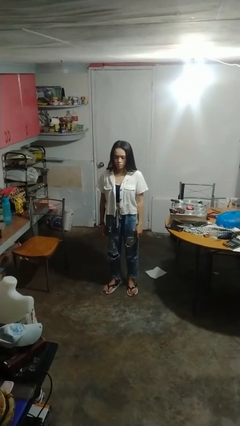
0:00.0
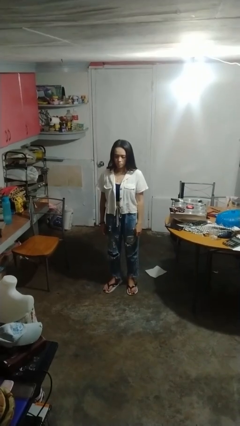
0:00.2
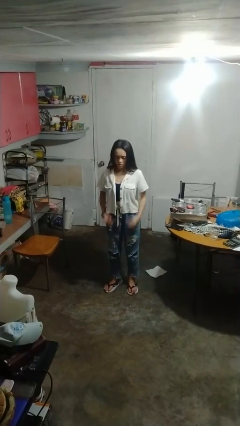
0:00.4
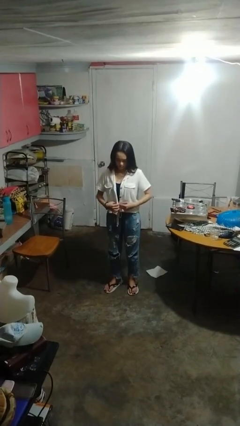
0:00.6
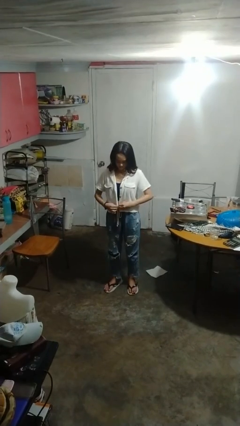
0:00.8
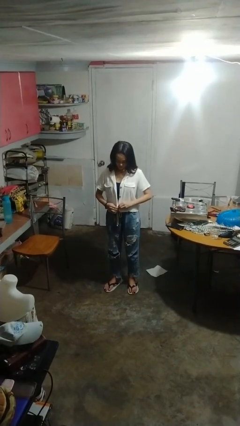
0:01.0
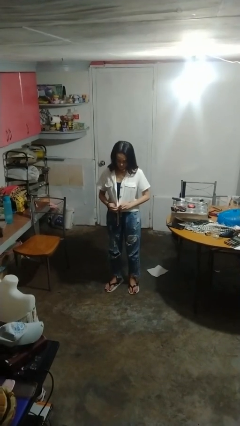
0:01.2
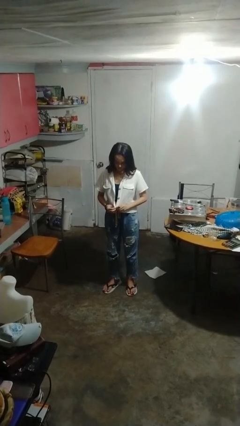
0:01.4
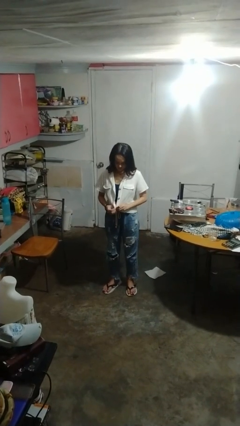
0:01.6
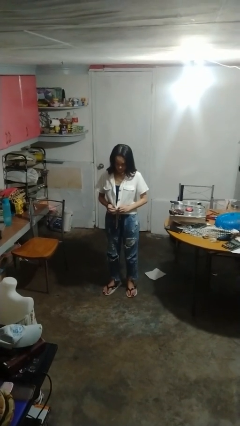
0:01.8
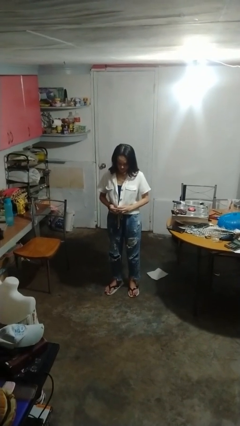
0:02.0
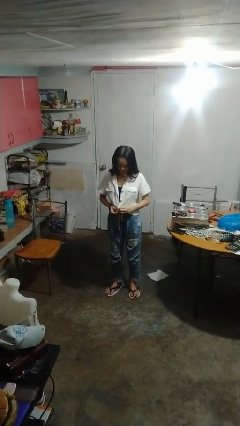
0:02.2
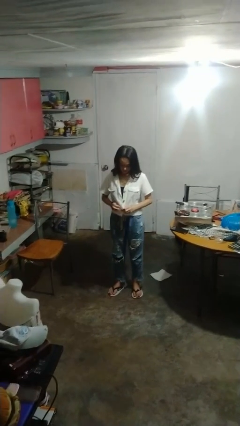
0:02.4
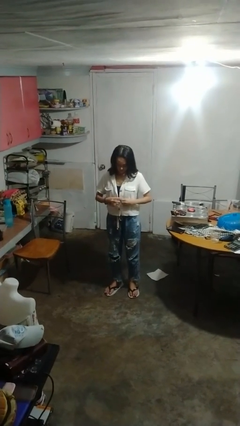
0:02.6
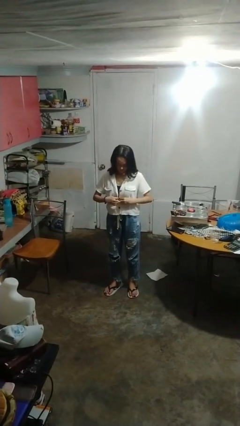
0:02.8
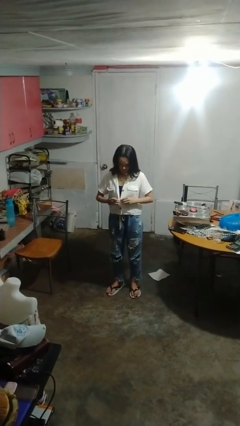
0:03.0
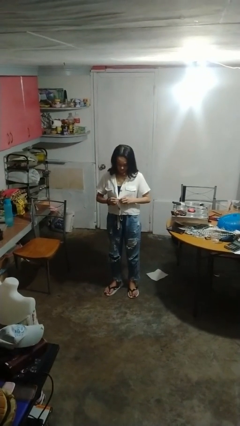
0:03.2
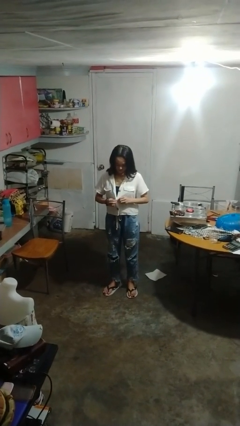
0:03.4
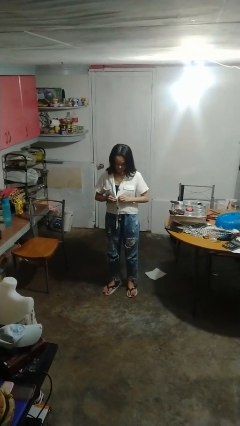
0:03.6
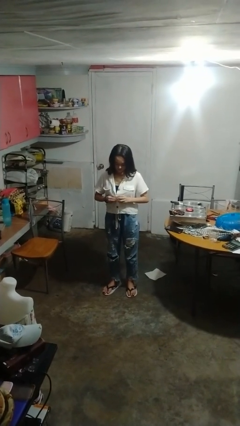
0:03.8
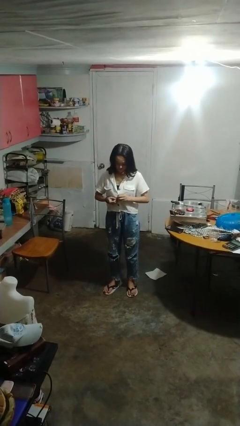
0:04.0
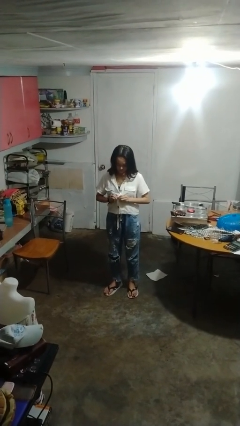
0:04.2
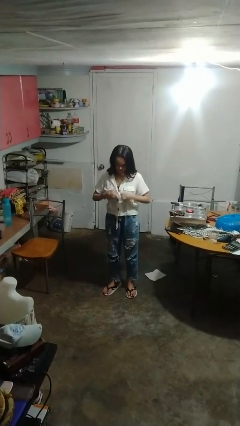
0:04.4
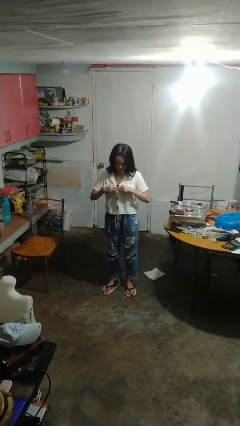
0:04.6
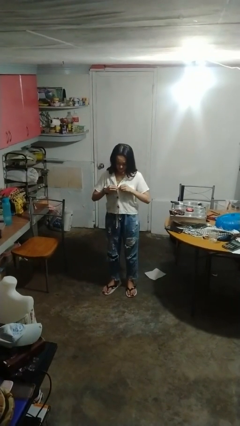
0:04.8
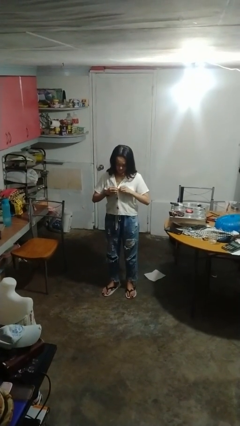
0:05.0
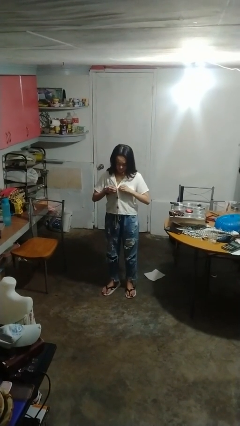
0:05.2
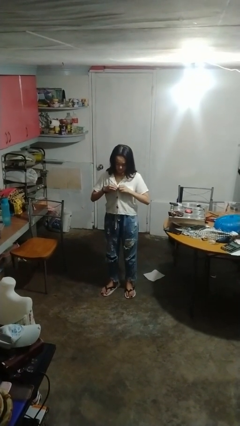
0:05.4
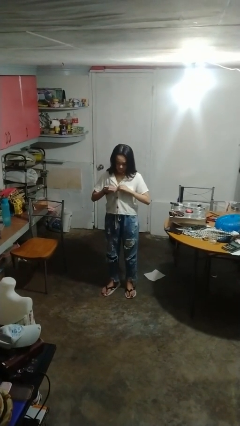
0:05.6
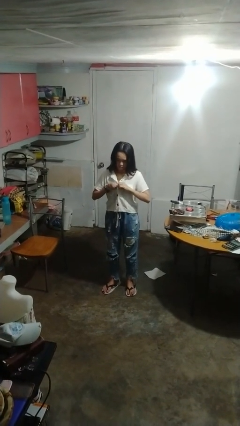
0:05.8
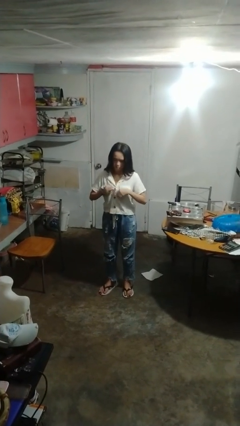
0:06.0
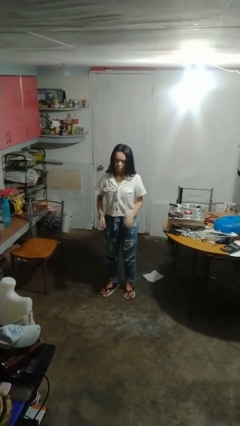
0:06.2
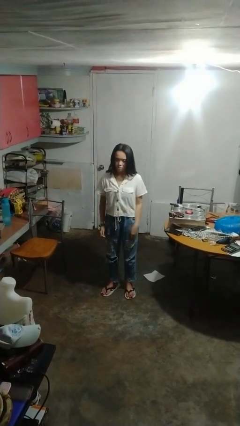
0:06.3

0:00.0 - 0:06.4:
person buttons shirt

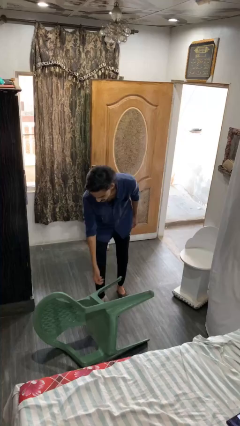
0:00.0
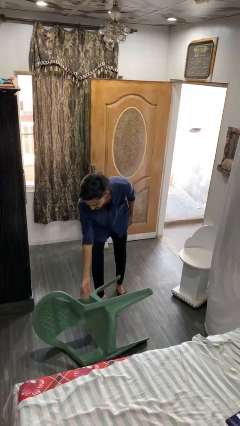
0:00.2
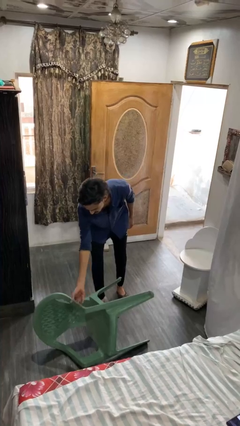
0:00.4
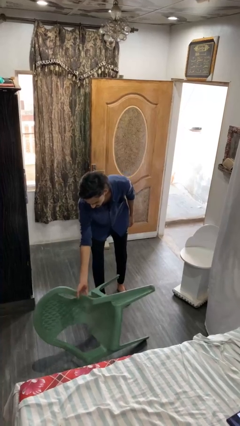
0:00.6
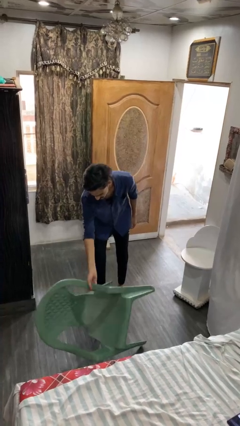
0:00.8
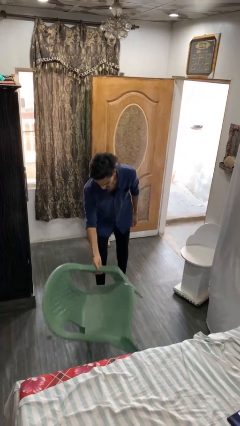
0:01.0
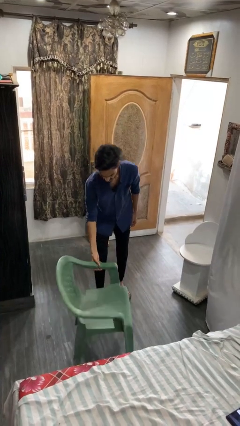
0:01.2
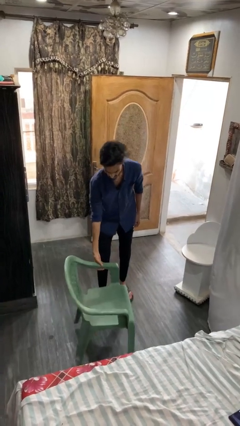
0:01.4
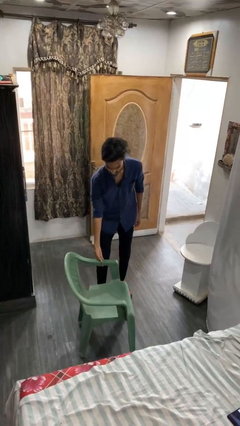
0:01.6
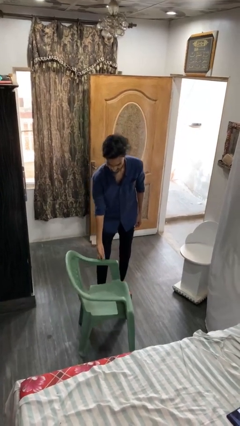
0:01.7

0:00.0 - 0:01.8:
person sets upright furniture

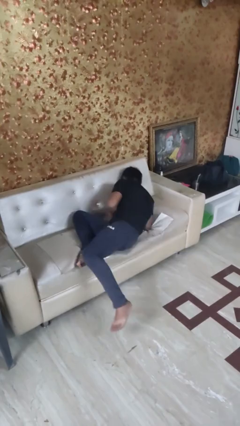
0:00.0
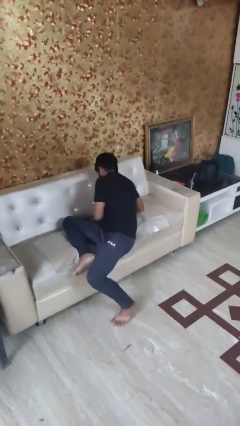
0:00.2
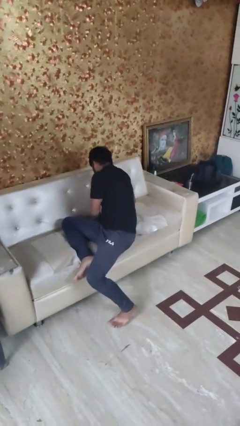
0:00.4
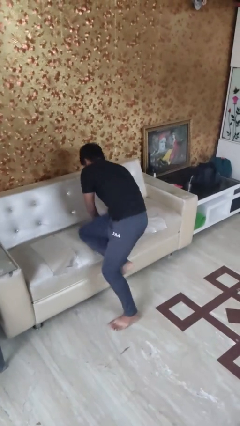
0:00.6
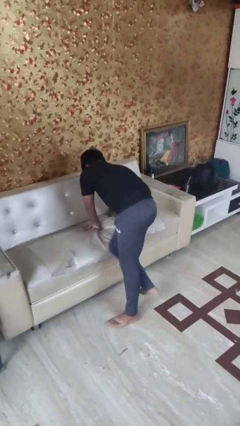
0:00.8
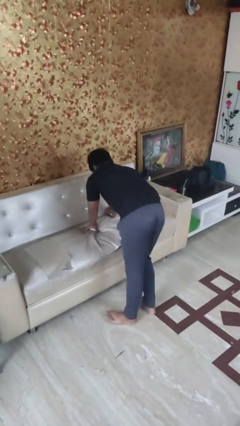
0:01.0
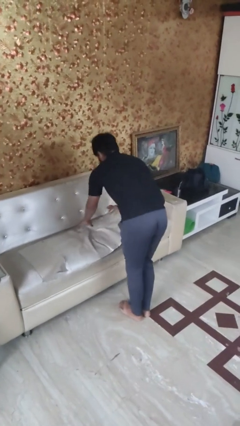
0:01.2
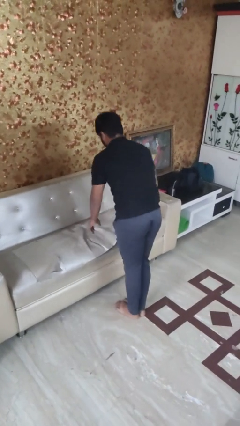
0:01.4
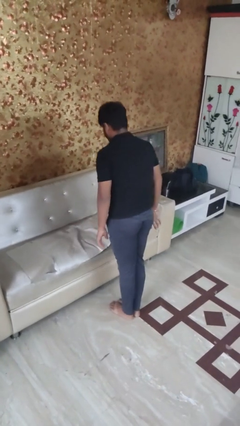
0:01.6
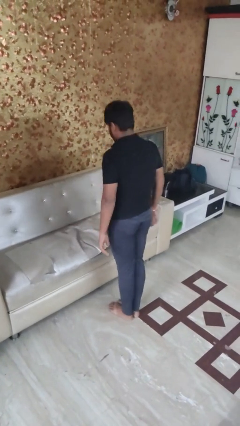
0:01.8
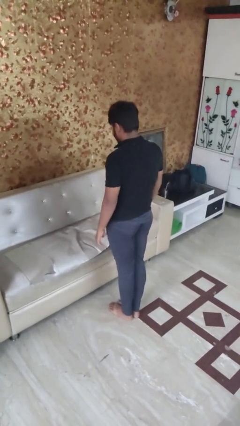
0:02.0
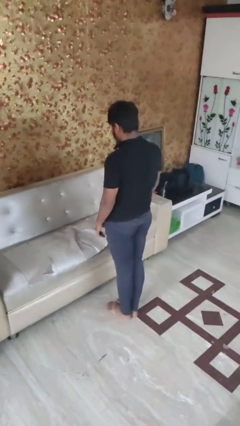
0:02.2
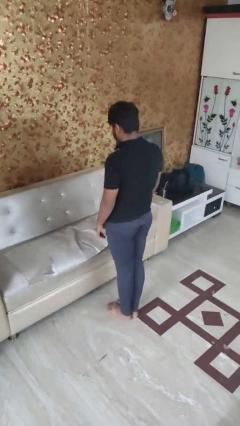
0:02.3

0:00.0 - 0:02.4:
person stands up

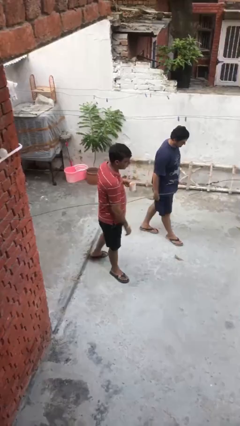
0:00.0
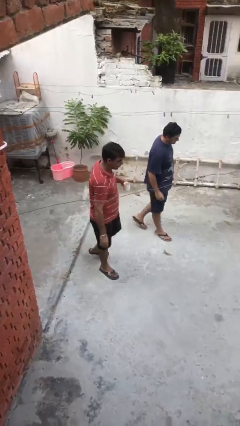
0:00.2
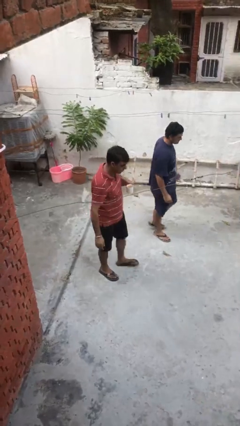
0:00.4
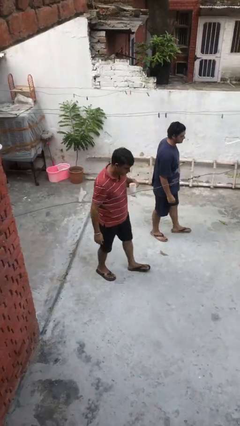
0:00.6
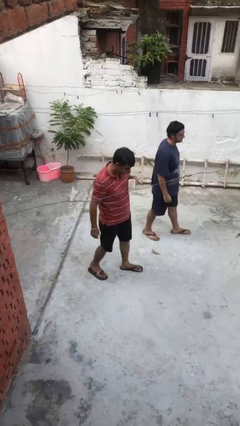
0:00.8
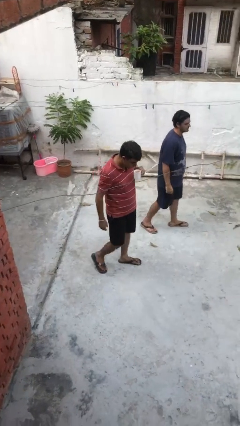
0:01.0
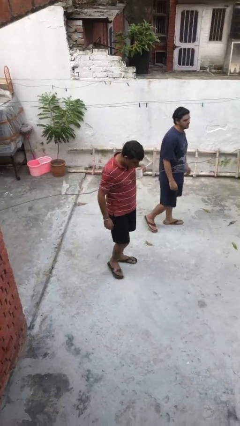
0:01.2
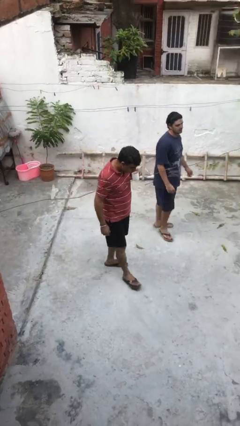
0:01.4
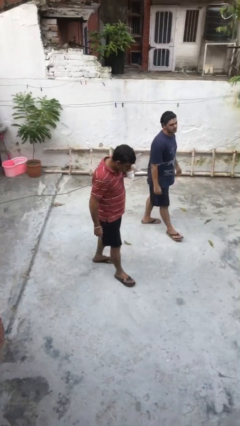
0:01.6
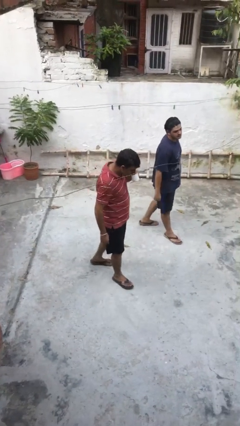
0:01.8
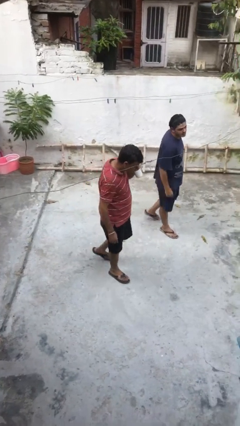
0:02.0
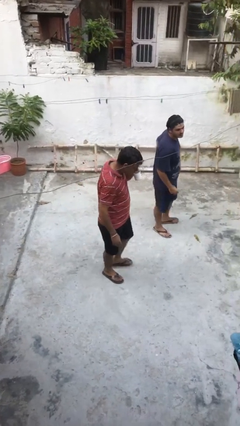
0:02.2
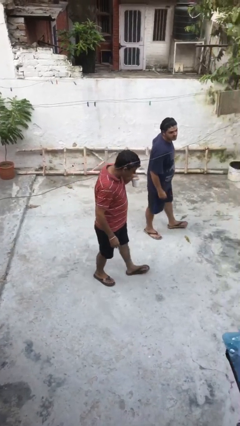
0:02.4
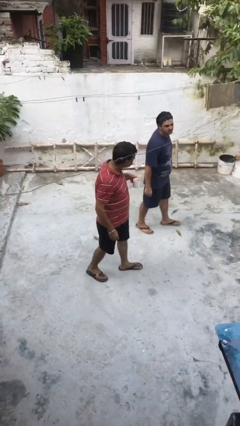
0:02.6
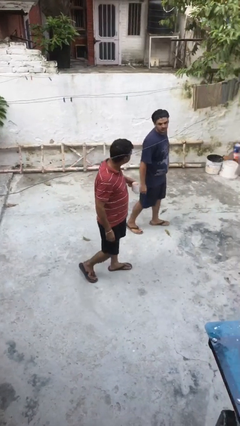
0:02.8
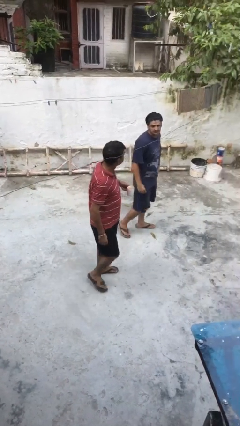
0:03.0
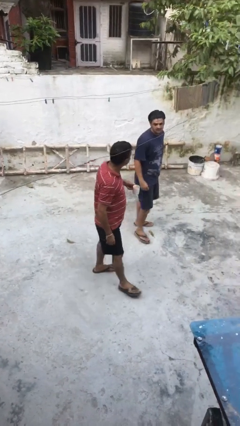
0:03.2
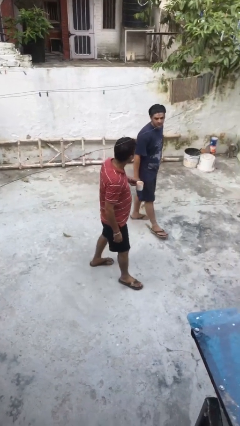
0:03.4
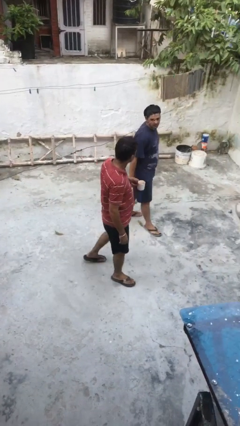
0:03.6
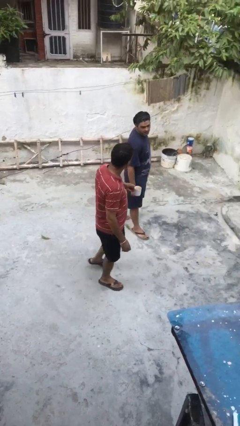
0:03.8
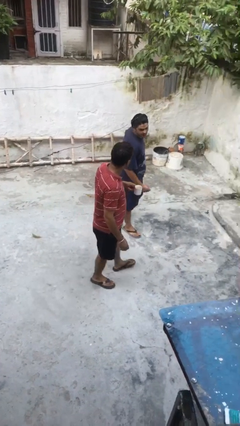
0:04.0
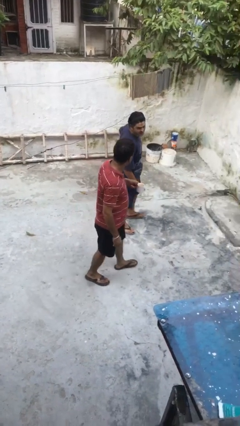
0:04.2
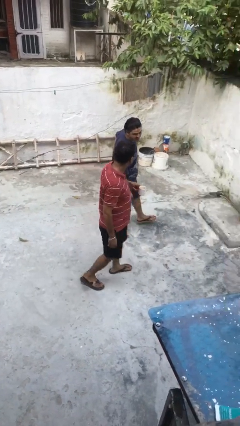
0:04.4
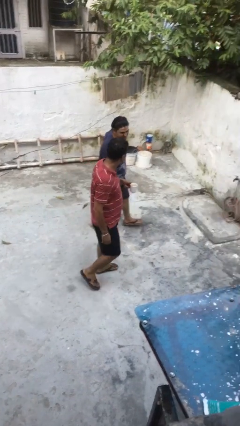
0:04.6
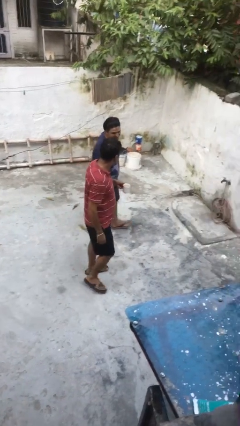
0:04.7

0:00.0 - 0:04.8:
person talks to person

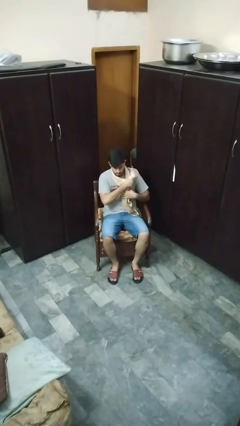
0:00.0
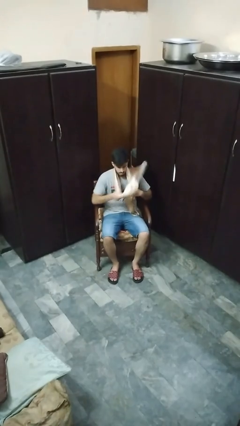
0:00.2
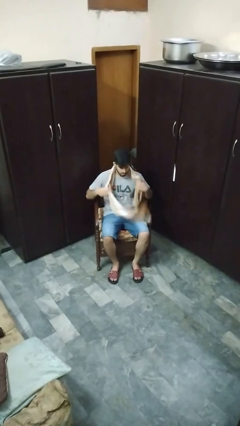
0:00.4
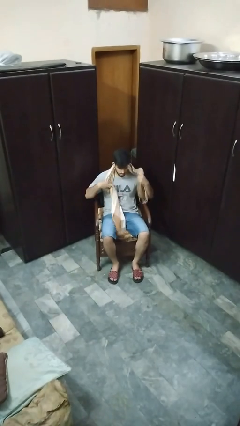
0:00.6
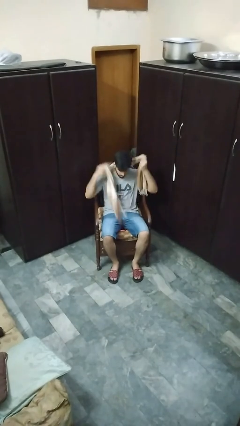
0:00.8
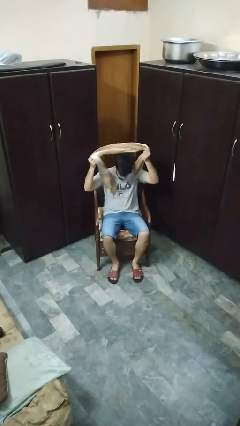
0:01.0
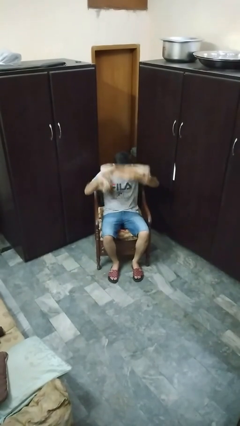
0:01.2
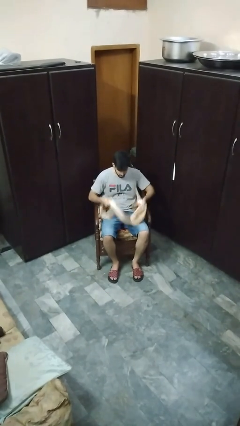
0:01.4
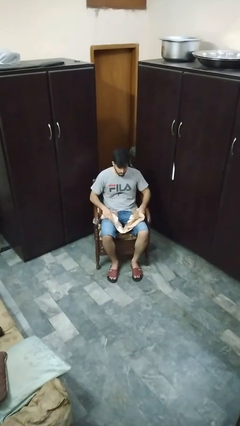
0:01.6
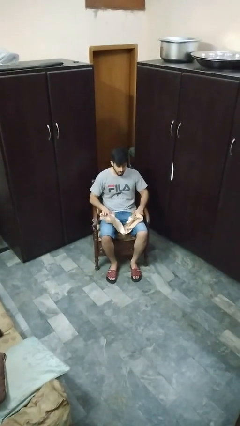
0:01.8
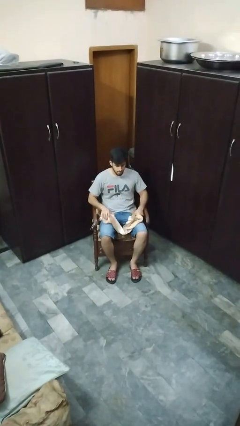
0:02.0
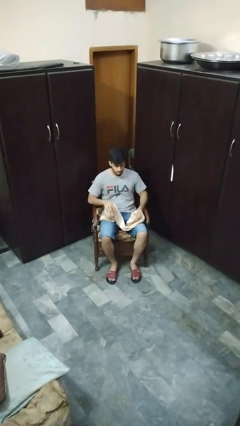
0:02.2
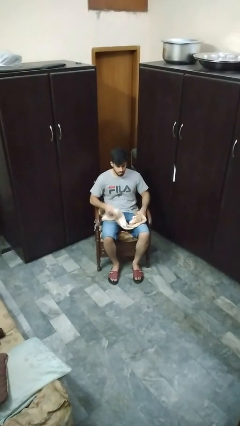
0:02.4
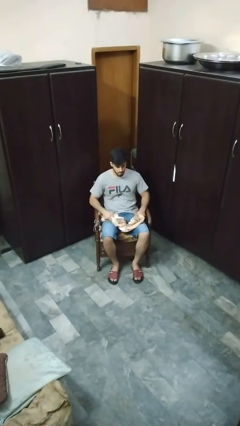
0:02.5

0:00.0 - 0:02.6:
person takes off scarf
